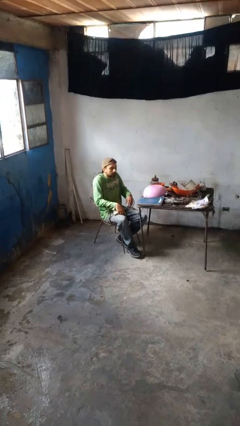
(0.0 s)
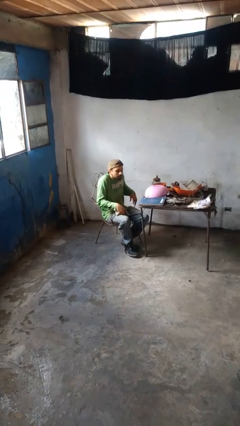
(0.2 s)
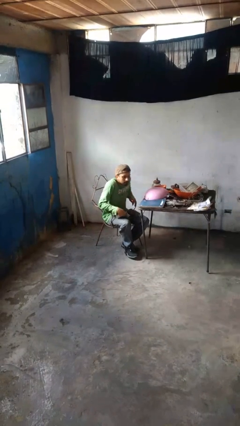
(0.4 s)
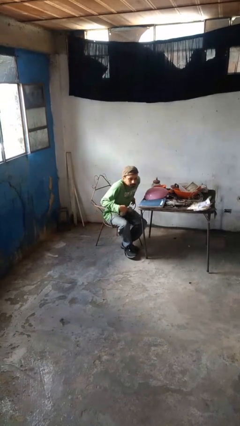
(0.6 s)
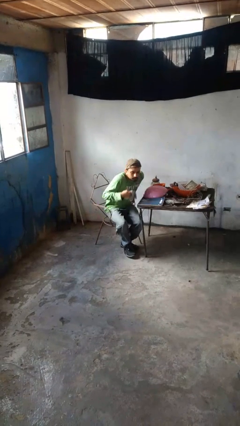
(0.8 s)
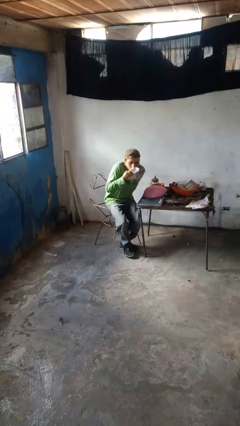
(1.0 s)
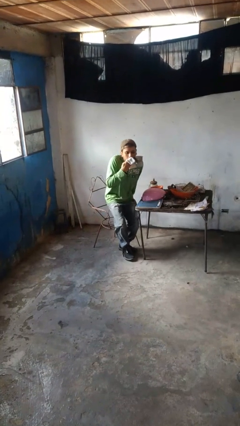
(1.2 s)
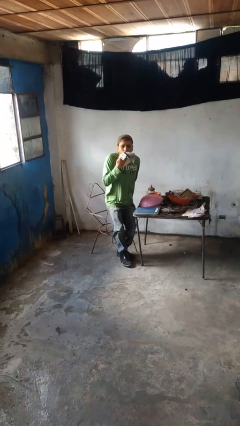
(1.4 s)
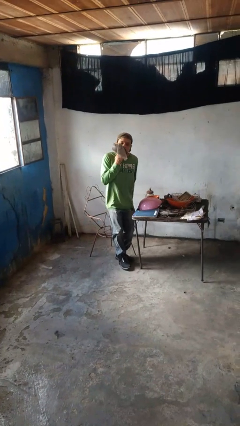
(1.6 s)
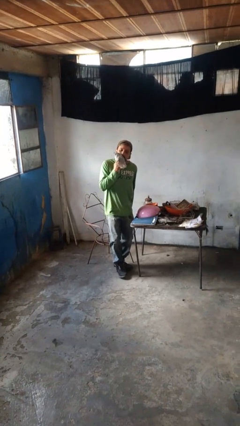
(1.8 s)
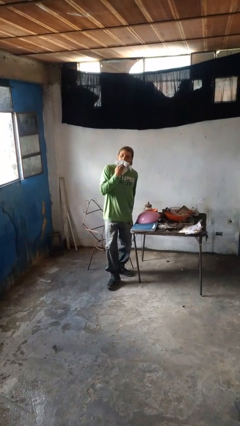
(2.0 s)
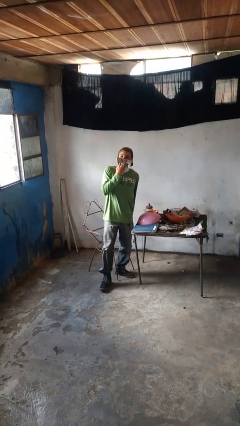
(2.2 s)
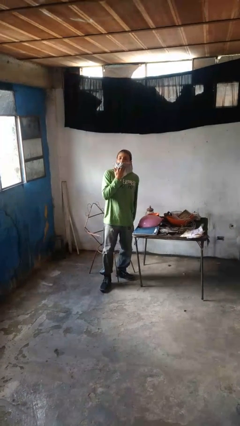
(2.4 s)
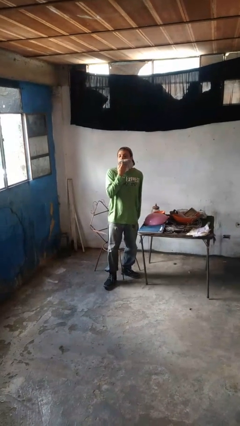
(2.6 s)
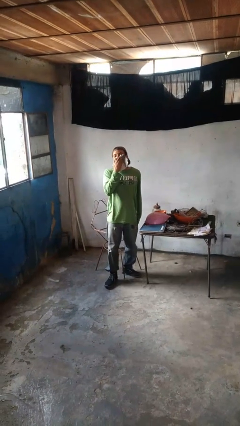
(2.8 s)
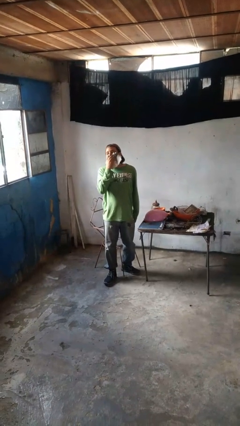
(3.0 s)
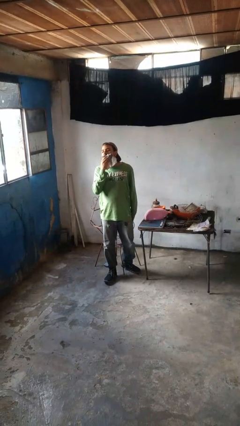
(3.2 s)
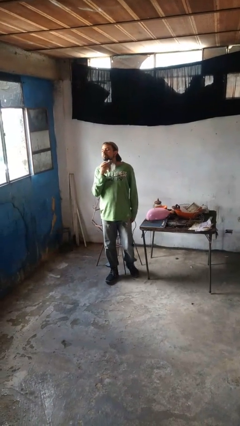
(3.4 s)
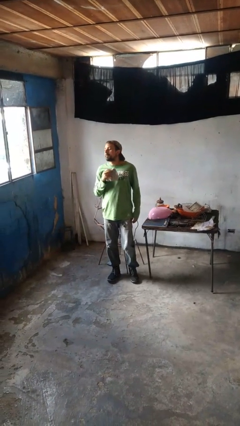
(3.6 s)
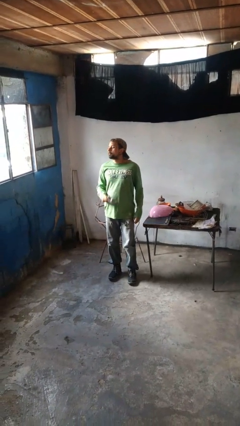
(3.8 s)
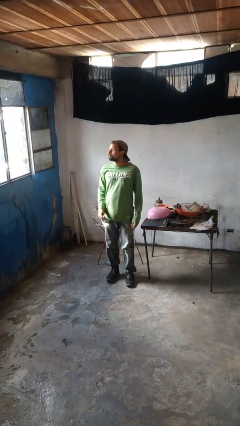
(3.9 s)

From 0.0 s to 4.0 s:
person wipes mouth with napkin

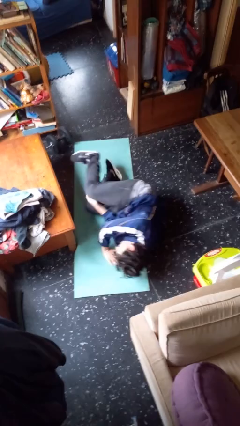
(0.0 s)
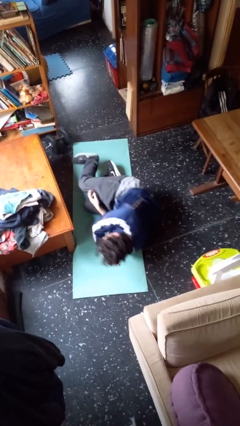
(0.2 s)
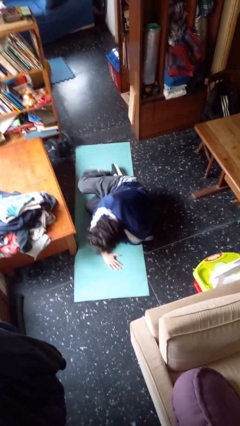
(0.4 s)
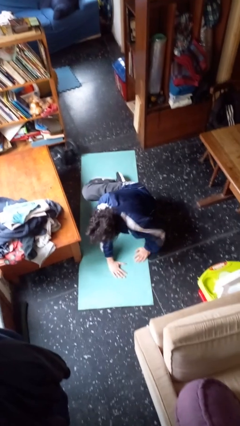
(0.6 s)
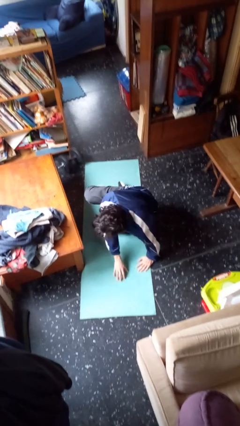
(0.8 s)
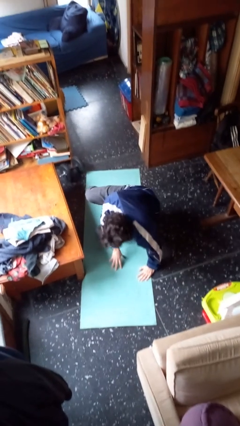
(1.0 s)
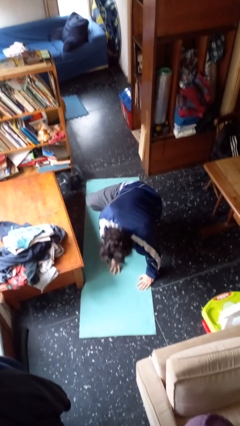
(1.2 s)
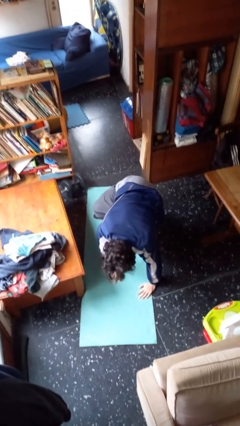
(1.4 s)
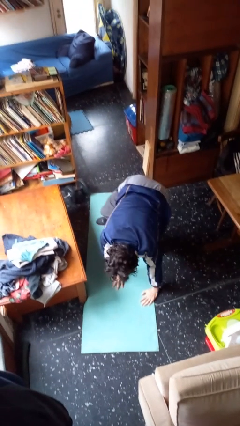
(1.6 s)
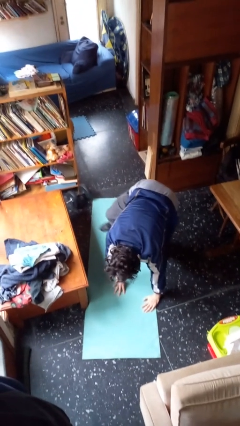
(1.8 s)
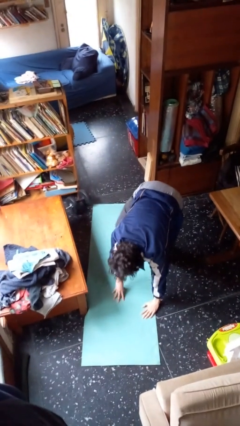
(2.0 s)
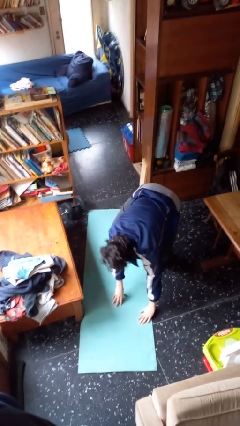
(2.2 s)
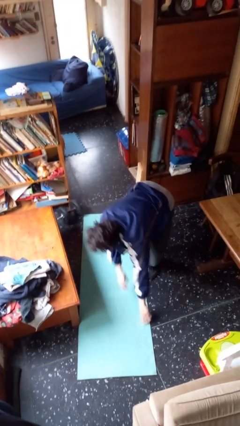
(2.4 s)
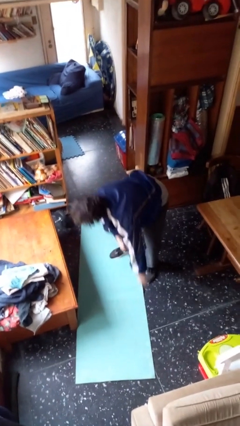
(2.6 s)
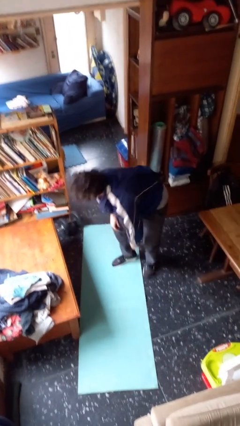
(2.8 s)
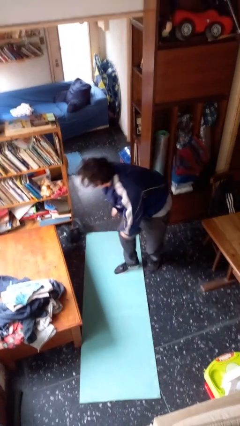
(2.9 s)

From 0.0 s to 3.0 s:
person stands up from floor

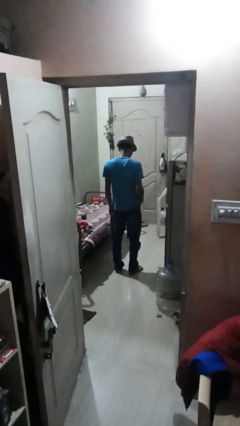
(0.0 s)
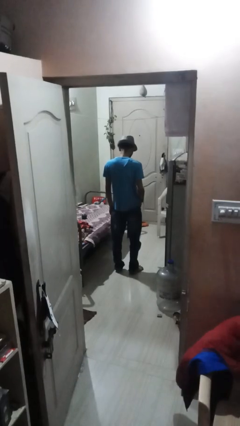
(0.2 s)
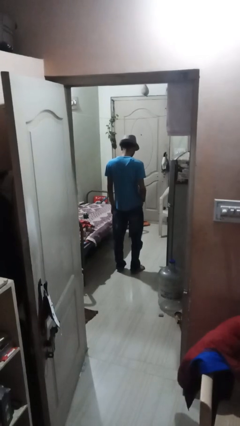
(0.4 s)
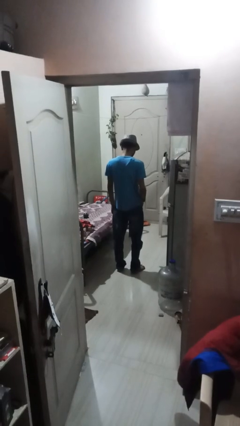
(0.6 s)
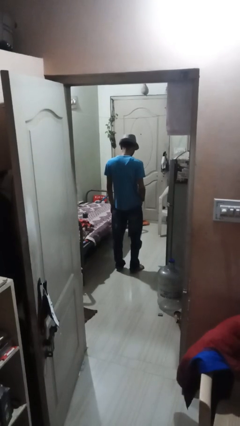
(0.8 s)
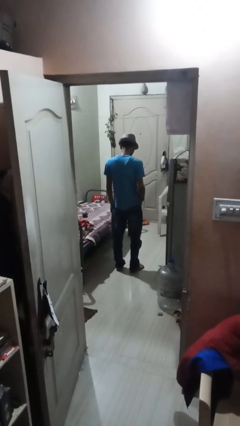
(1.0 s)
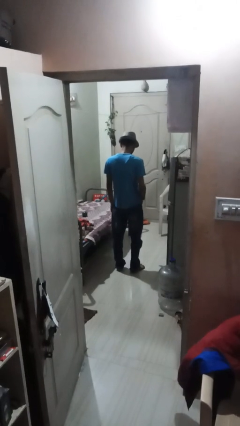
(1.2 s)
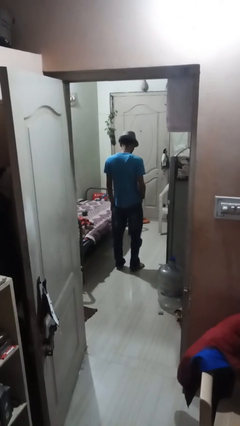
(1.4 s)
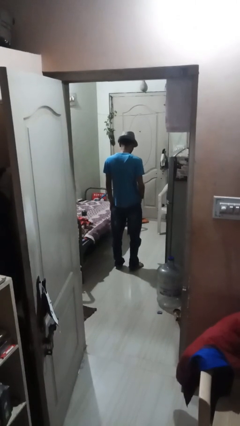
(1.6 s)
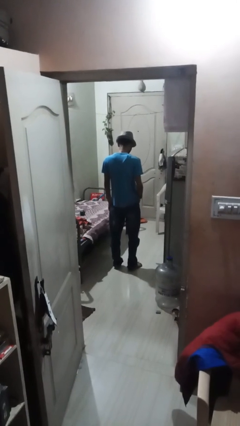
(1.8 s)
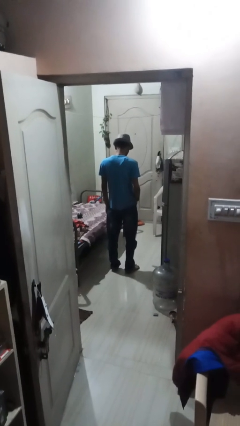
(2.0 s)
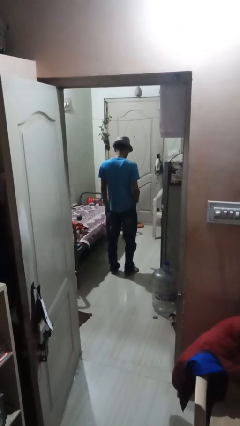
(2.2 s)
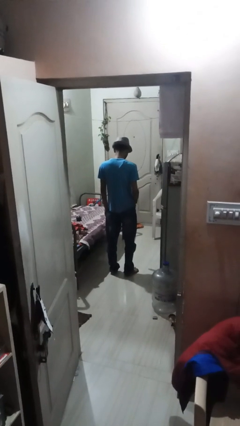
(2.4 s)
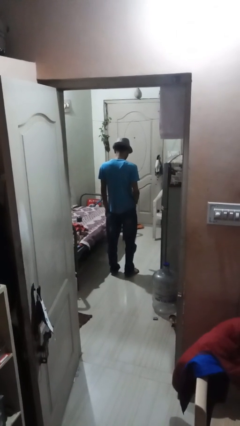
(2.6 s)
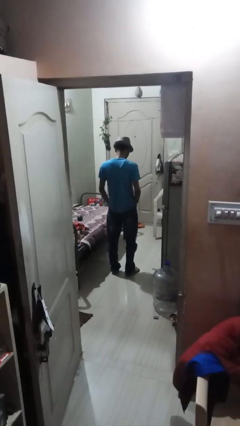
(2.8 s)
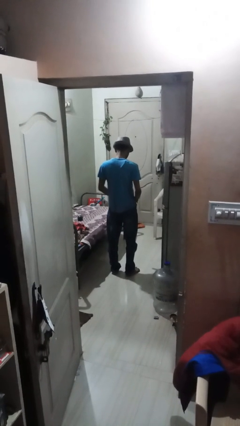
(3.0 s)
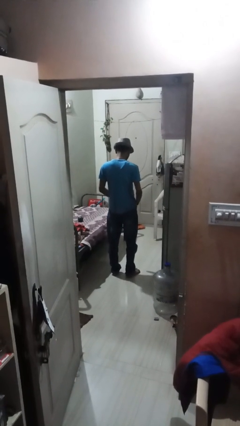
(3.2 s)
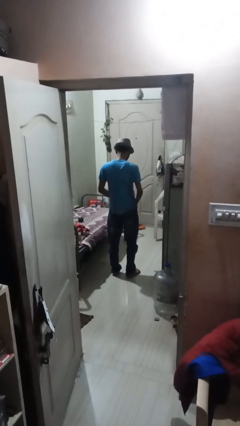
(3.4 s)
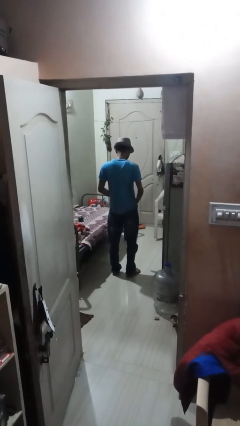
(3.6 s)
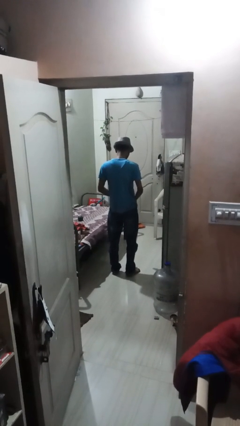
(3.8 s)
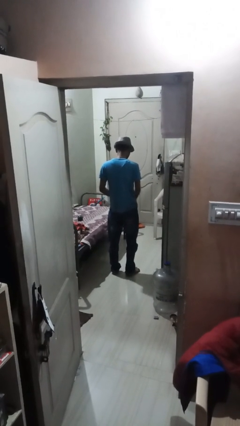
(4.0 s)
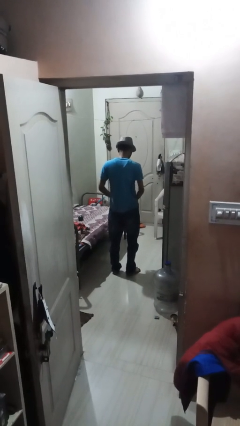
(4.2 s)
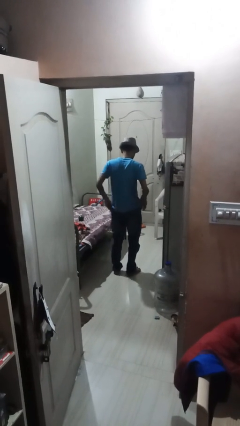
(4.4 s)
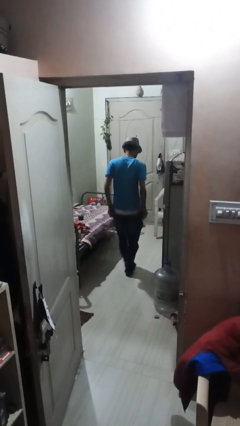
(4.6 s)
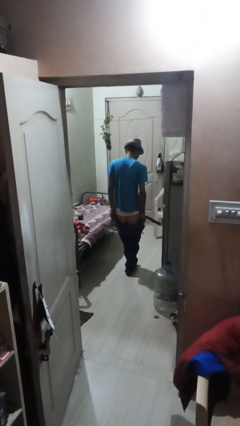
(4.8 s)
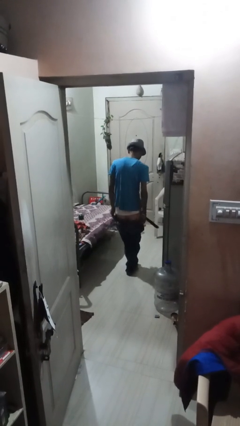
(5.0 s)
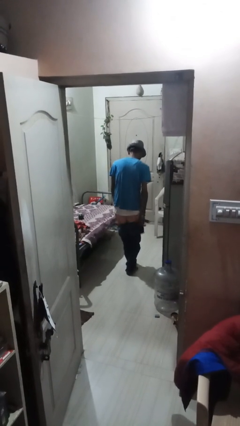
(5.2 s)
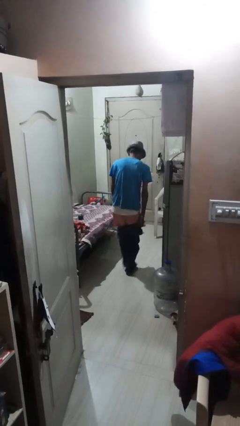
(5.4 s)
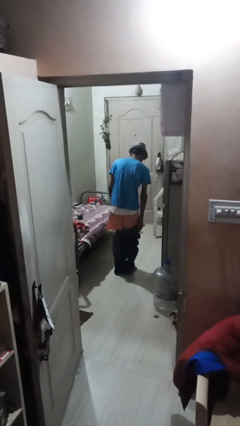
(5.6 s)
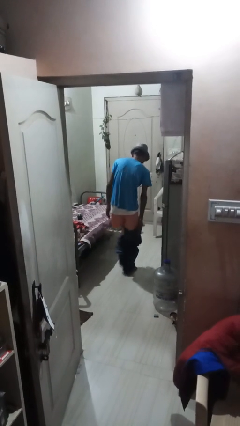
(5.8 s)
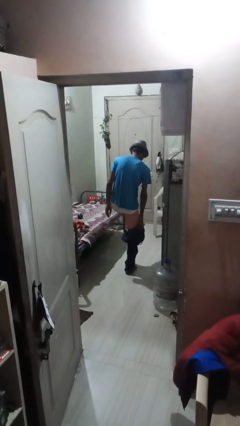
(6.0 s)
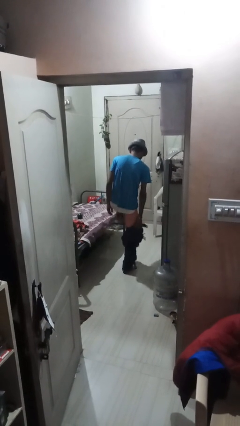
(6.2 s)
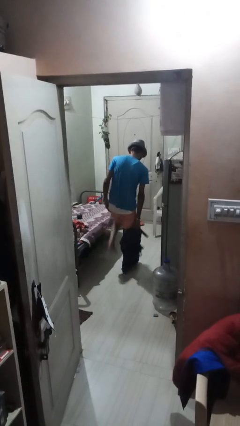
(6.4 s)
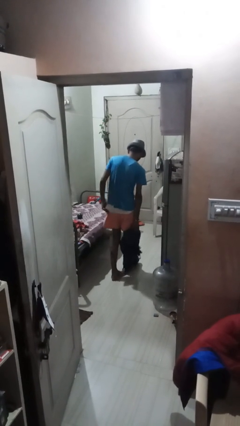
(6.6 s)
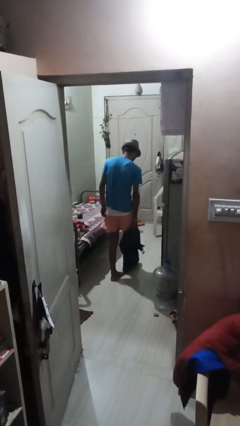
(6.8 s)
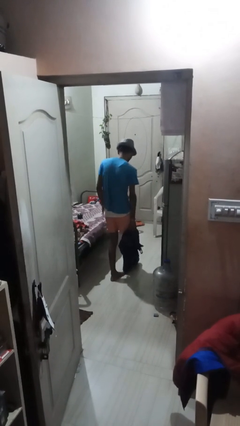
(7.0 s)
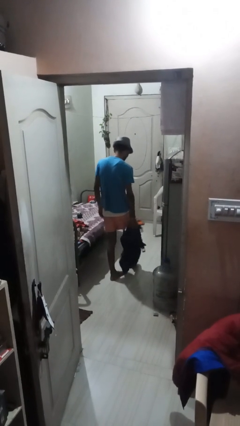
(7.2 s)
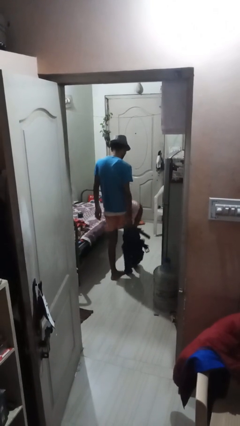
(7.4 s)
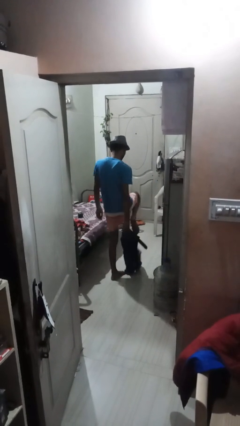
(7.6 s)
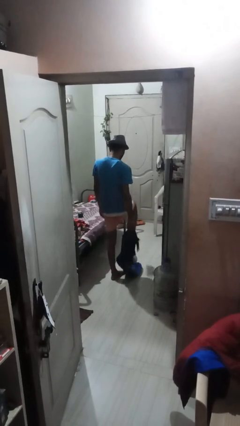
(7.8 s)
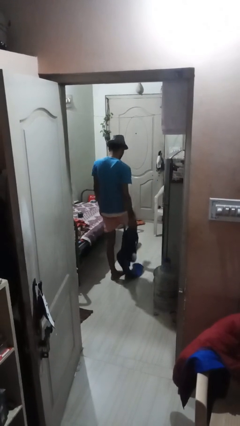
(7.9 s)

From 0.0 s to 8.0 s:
person takes off pants

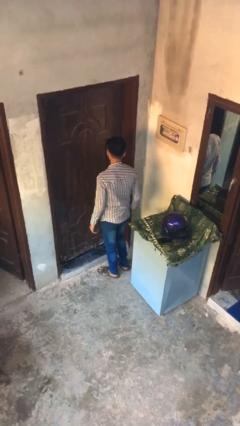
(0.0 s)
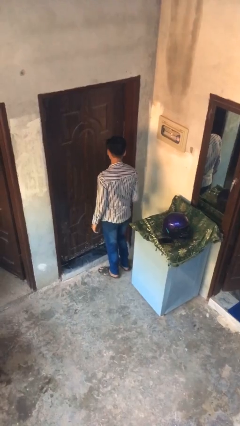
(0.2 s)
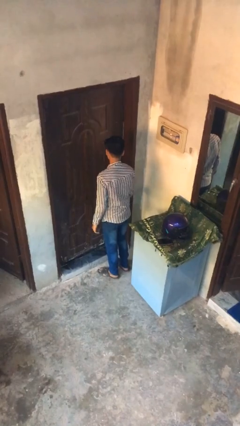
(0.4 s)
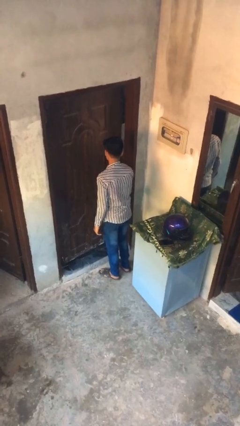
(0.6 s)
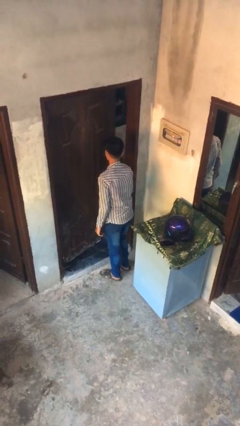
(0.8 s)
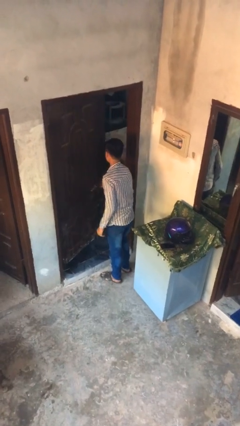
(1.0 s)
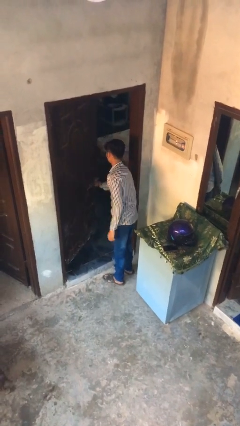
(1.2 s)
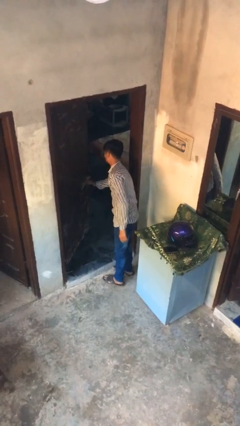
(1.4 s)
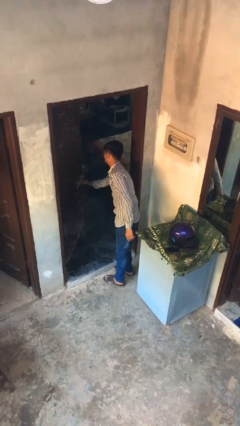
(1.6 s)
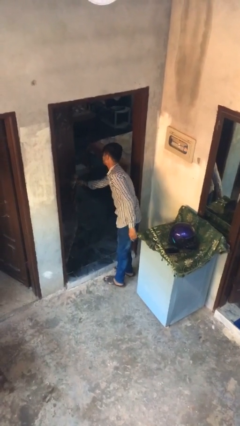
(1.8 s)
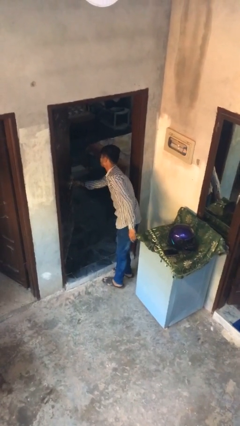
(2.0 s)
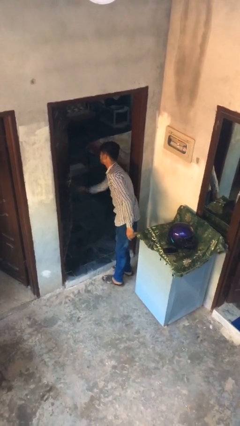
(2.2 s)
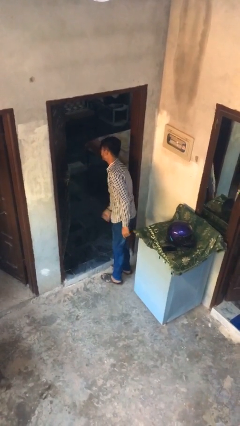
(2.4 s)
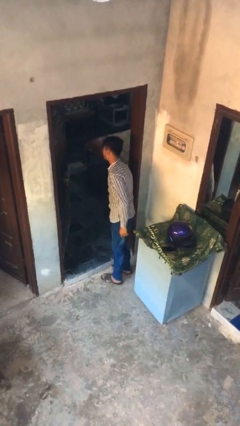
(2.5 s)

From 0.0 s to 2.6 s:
person opens facility door
